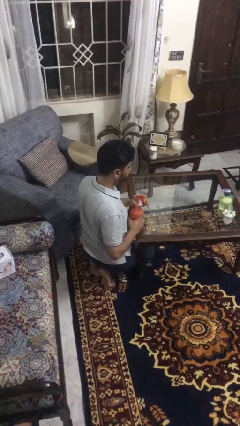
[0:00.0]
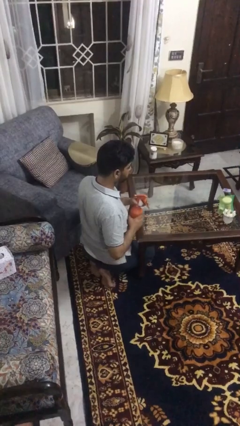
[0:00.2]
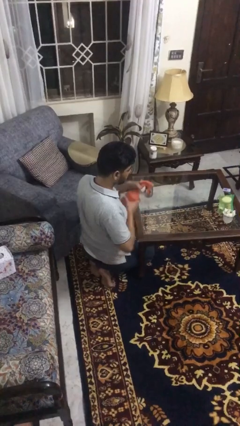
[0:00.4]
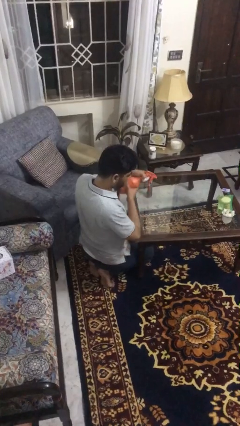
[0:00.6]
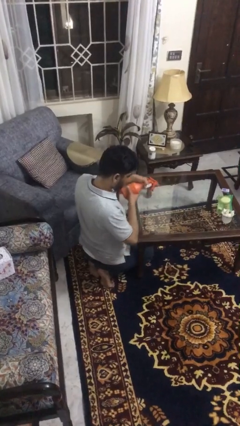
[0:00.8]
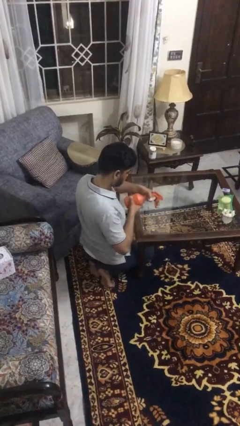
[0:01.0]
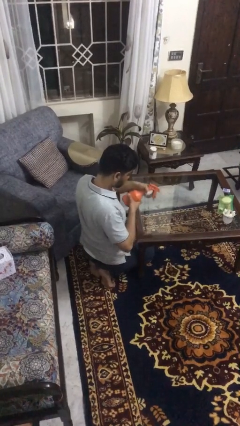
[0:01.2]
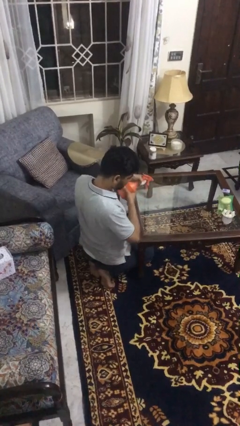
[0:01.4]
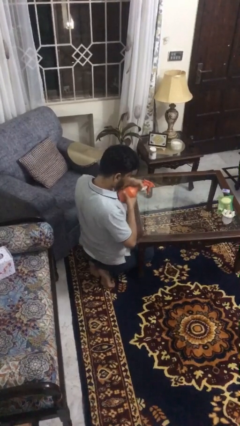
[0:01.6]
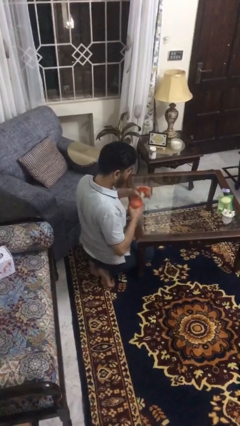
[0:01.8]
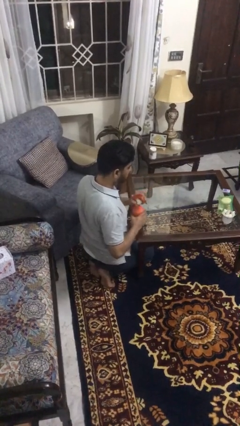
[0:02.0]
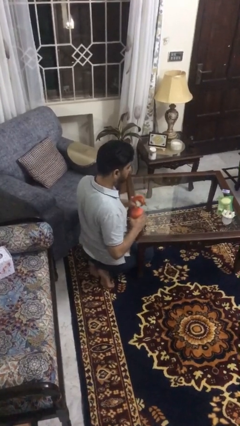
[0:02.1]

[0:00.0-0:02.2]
person sprays from bottle

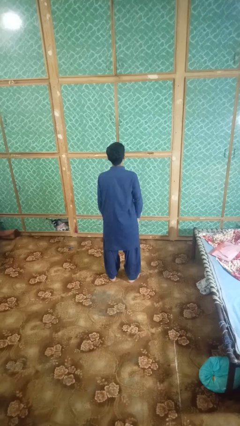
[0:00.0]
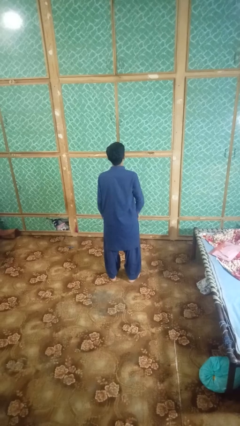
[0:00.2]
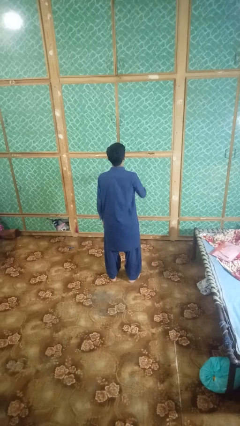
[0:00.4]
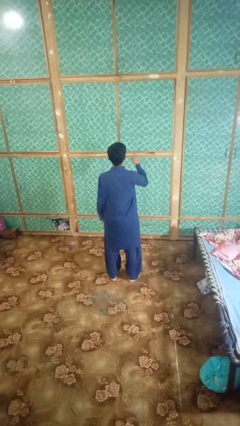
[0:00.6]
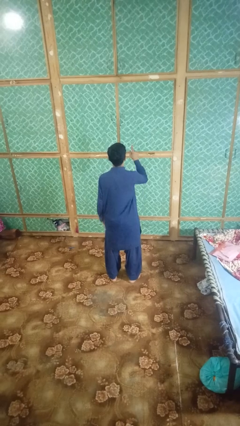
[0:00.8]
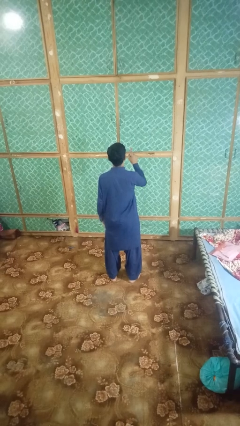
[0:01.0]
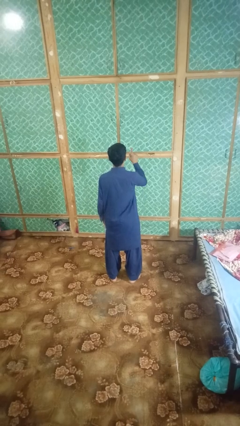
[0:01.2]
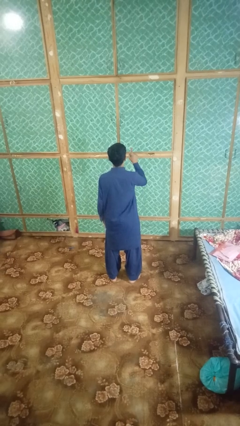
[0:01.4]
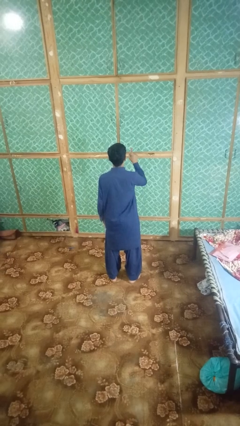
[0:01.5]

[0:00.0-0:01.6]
person gestures number one

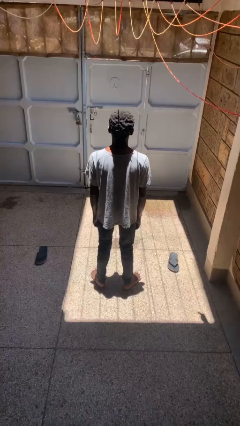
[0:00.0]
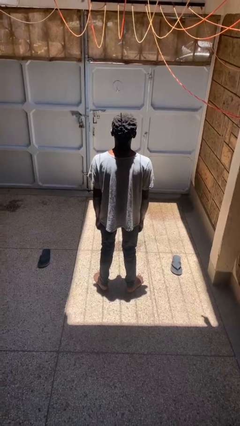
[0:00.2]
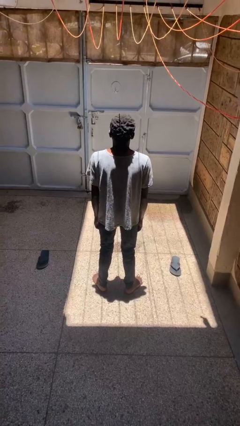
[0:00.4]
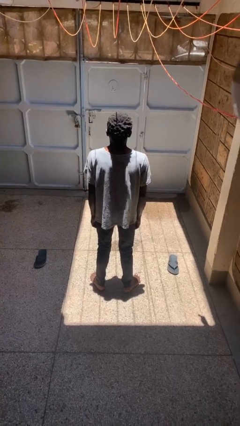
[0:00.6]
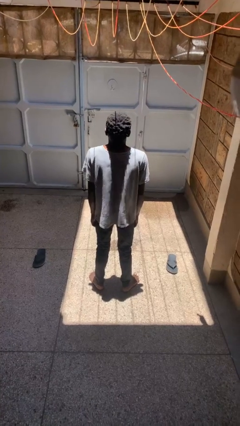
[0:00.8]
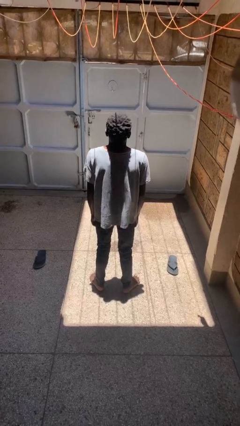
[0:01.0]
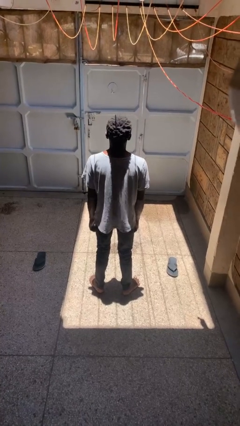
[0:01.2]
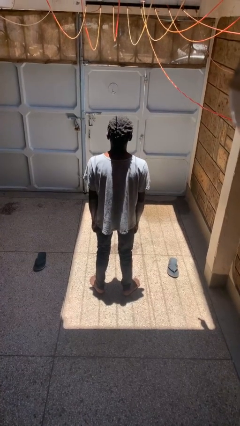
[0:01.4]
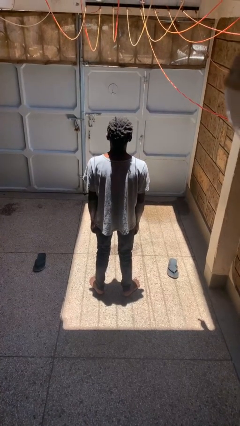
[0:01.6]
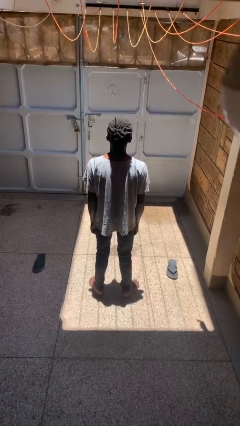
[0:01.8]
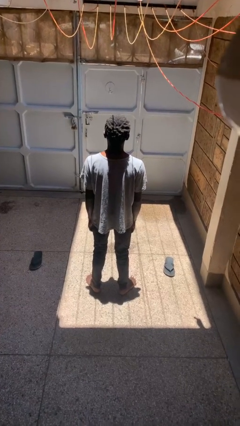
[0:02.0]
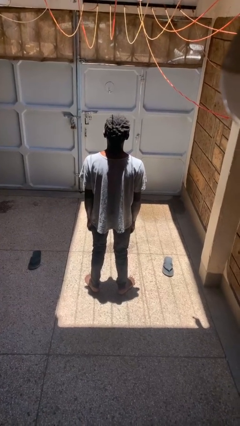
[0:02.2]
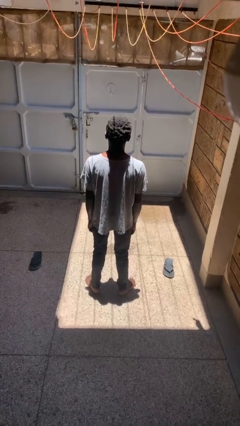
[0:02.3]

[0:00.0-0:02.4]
person shrugs

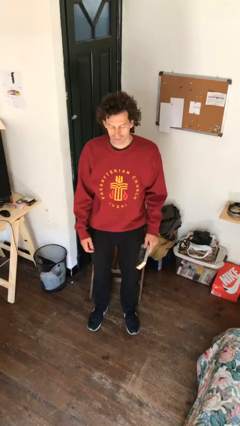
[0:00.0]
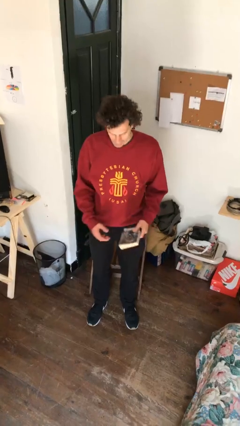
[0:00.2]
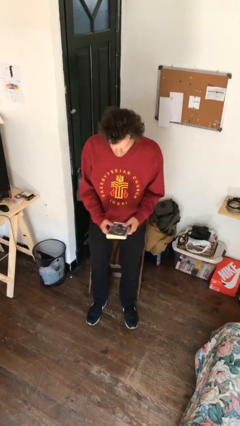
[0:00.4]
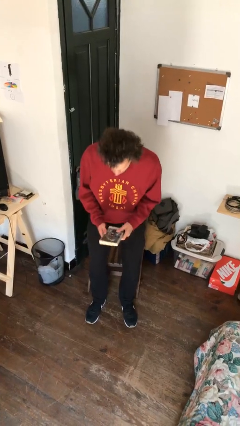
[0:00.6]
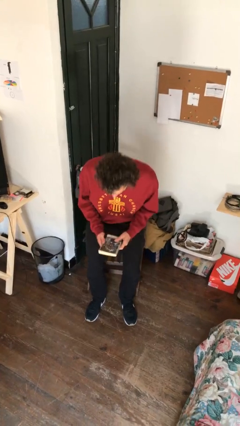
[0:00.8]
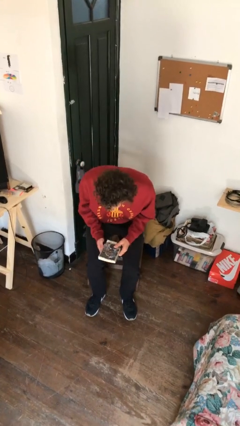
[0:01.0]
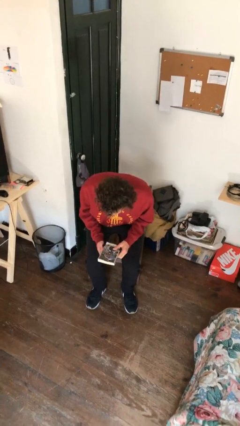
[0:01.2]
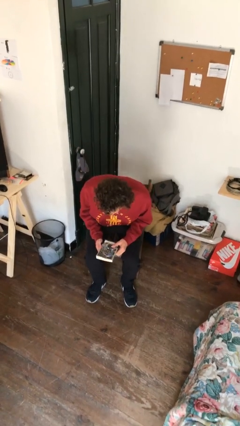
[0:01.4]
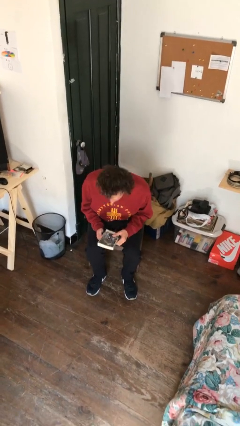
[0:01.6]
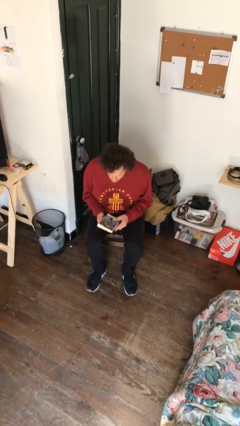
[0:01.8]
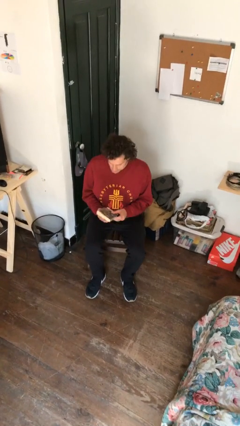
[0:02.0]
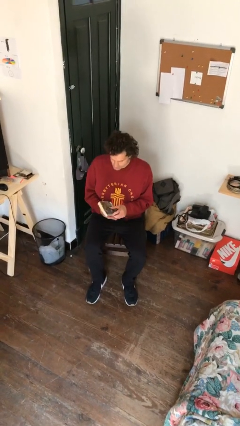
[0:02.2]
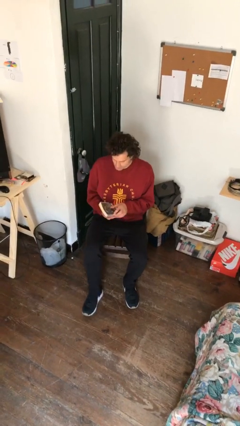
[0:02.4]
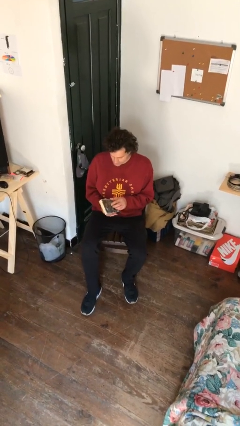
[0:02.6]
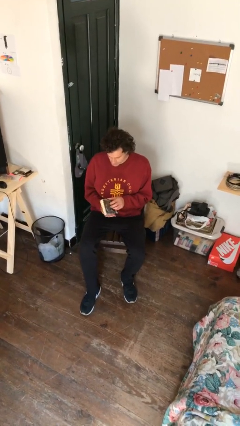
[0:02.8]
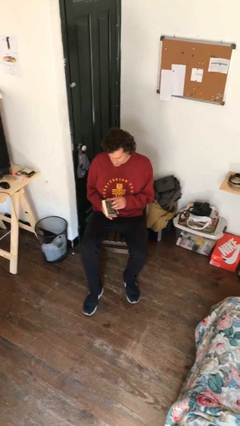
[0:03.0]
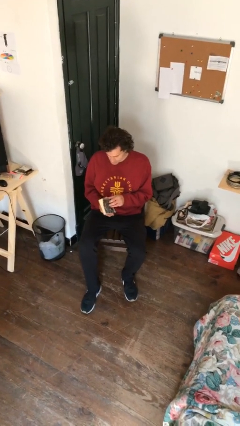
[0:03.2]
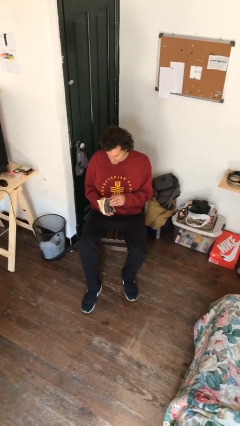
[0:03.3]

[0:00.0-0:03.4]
person sits down

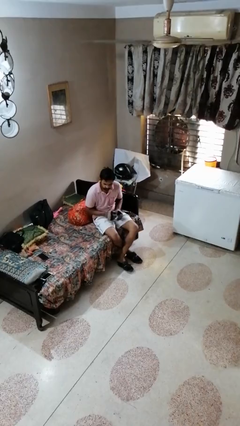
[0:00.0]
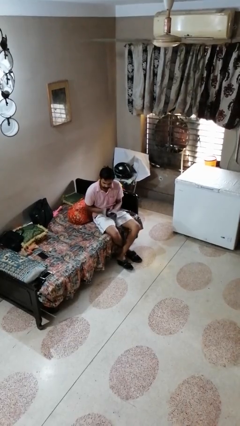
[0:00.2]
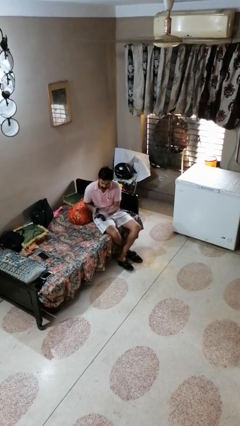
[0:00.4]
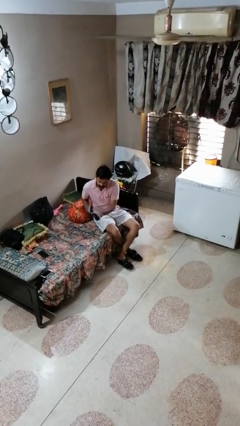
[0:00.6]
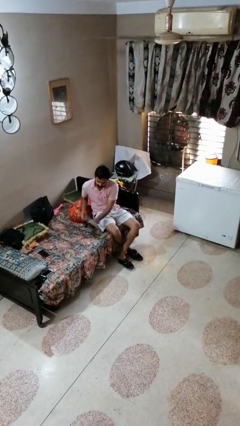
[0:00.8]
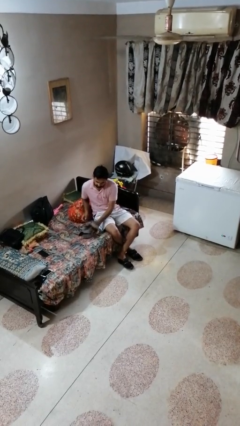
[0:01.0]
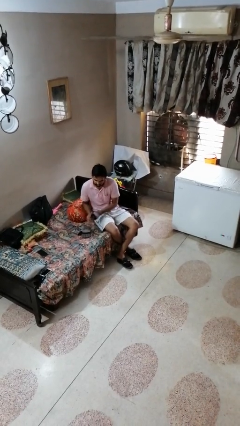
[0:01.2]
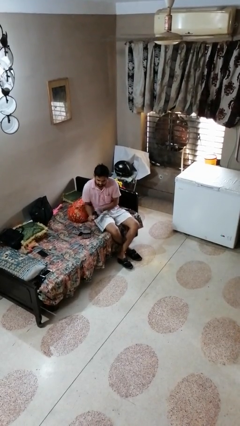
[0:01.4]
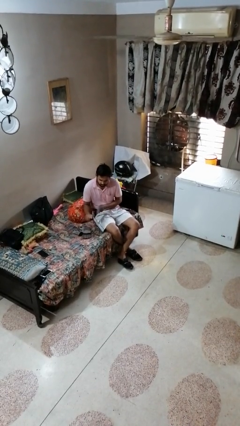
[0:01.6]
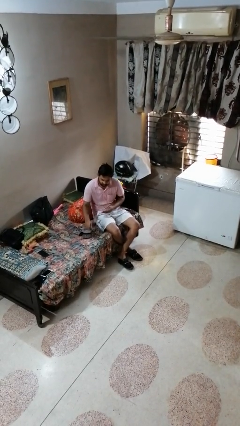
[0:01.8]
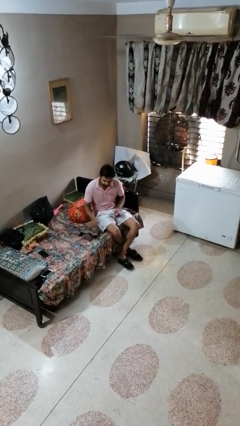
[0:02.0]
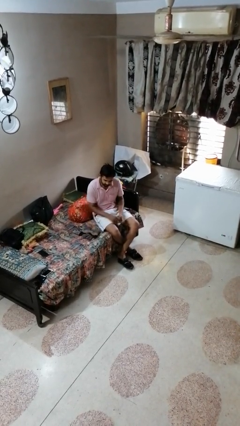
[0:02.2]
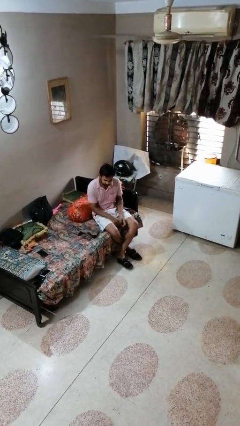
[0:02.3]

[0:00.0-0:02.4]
person takes off gloves

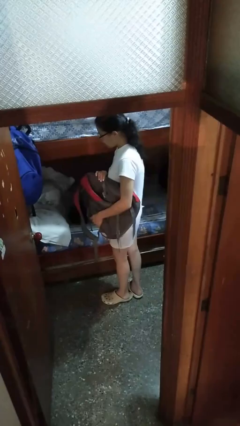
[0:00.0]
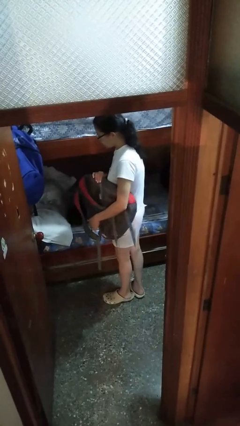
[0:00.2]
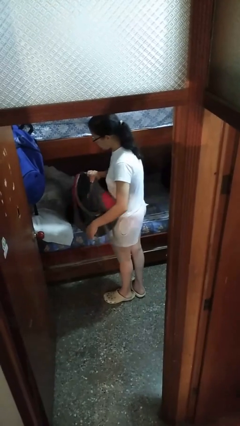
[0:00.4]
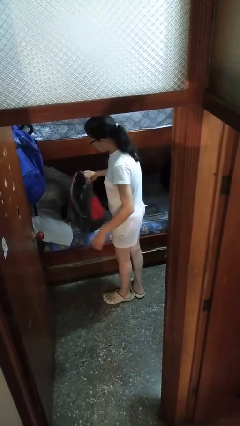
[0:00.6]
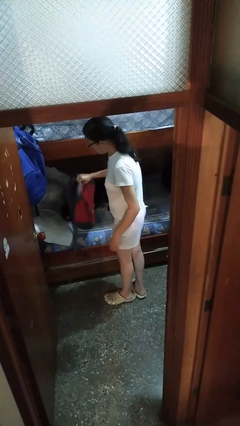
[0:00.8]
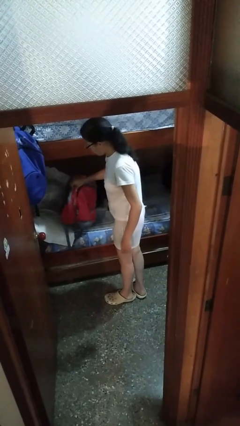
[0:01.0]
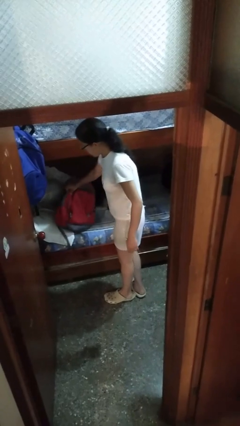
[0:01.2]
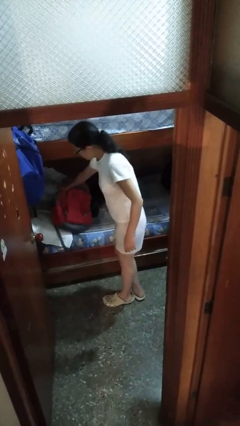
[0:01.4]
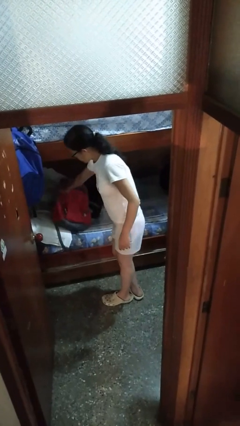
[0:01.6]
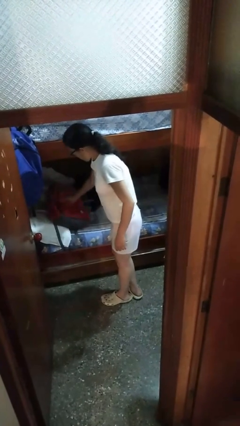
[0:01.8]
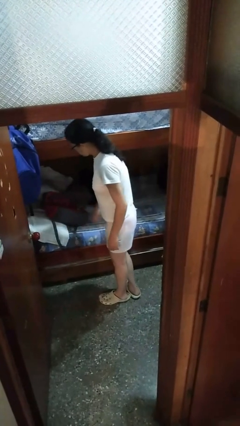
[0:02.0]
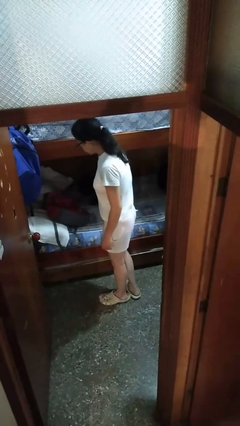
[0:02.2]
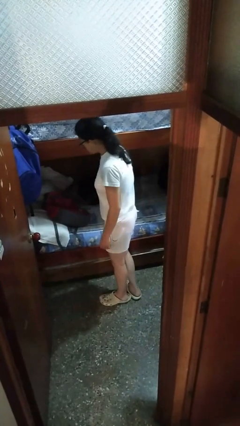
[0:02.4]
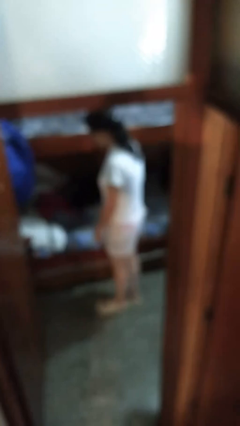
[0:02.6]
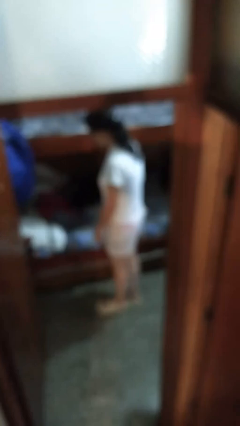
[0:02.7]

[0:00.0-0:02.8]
person puts down object on bed

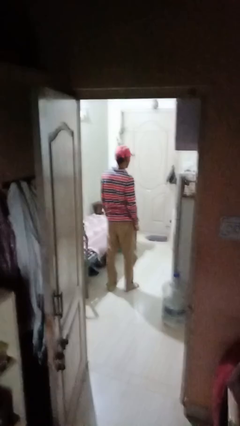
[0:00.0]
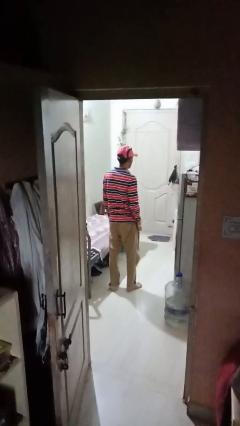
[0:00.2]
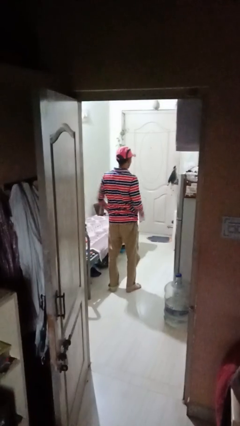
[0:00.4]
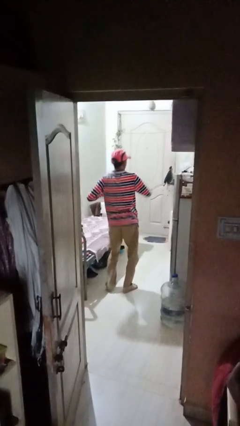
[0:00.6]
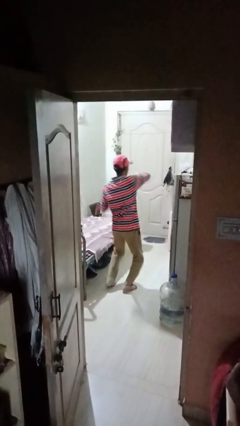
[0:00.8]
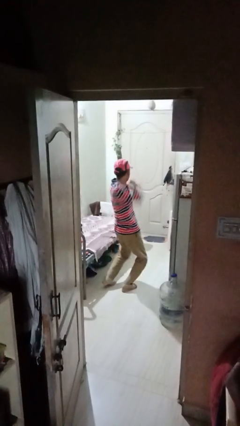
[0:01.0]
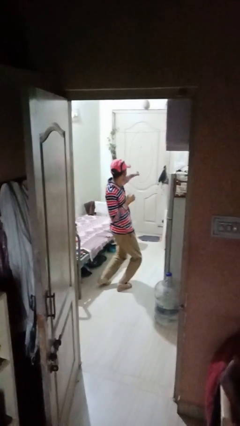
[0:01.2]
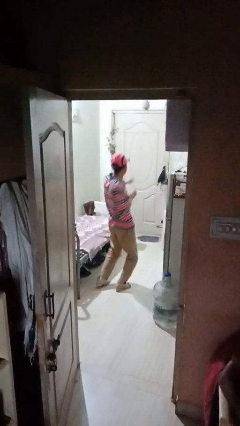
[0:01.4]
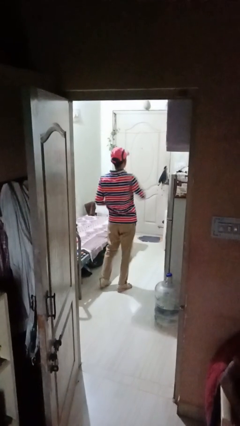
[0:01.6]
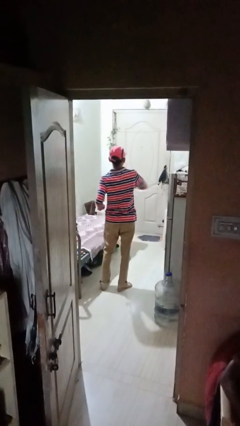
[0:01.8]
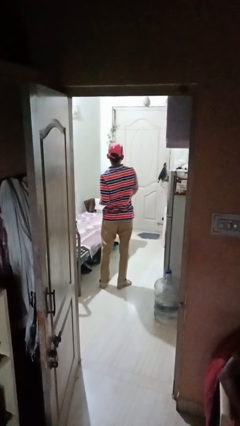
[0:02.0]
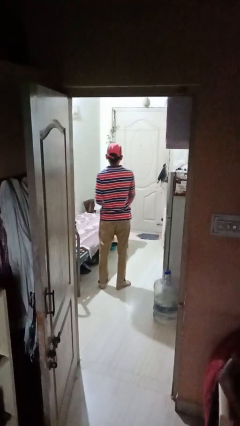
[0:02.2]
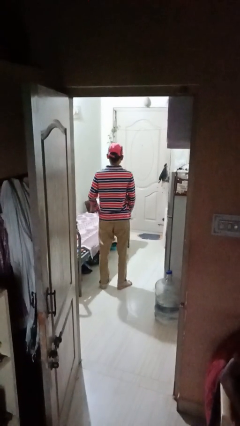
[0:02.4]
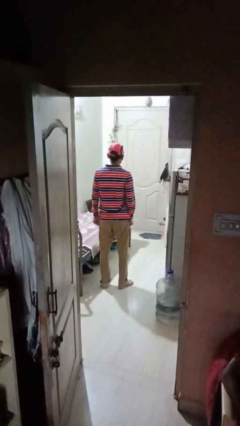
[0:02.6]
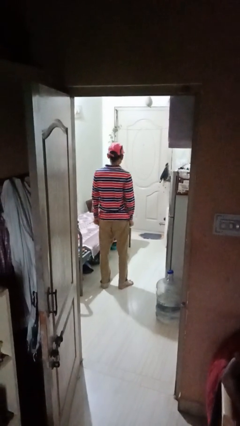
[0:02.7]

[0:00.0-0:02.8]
person punches
